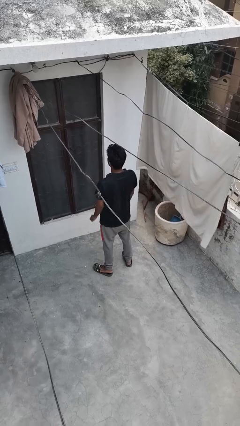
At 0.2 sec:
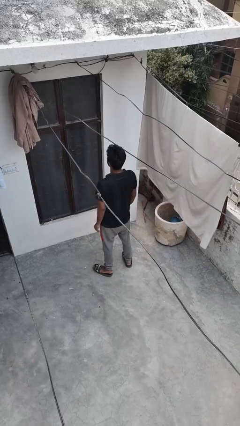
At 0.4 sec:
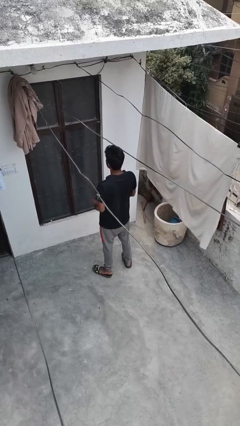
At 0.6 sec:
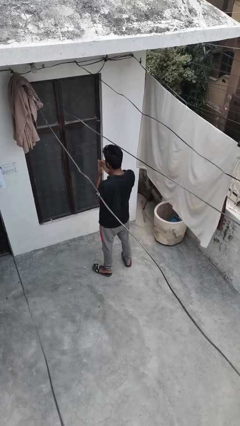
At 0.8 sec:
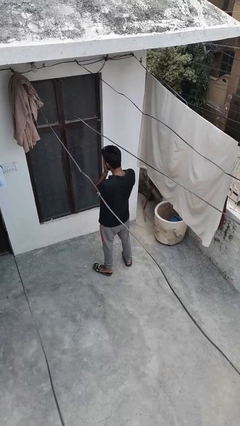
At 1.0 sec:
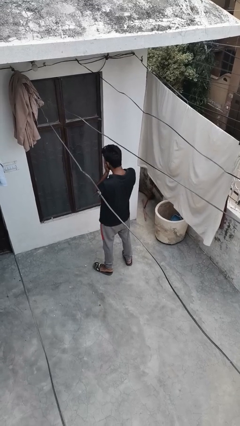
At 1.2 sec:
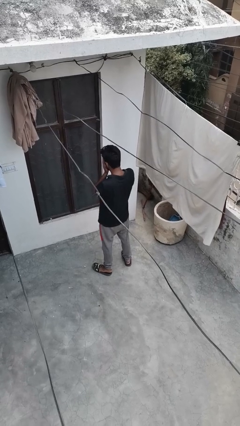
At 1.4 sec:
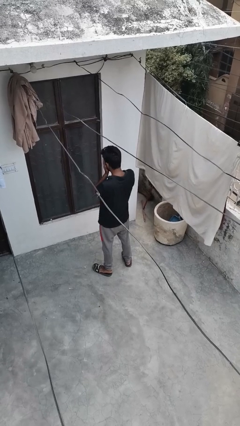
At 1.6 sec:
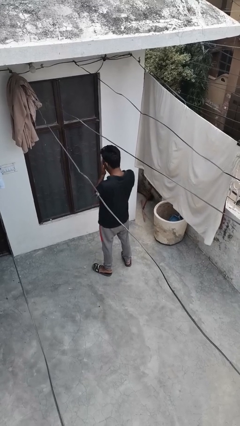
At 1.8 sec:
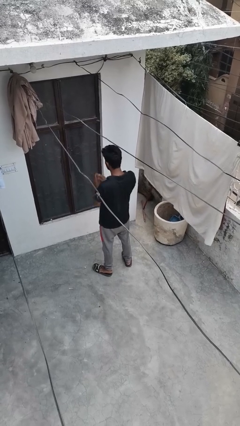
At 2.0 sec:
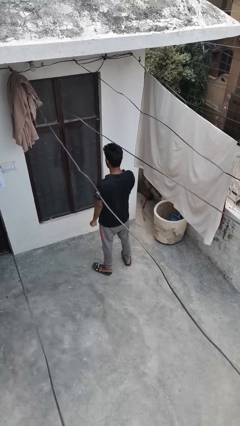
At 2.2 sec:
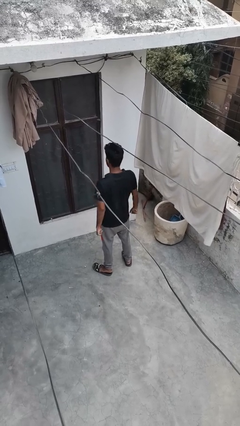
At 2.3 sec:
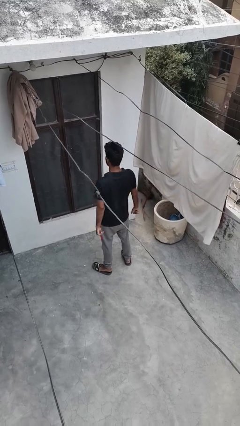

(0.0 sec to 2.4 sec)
person covers face with hands

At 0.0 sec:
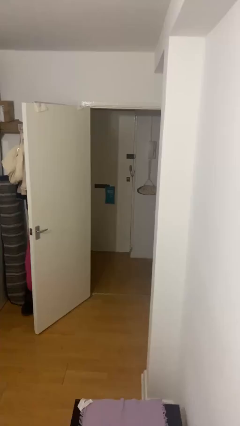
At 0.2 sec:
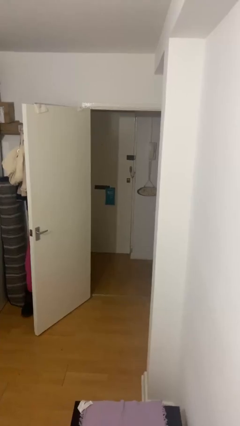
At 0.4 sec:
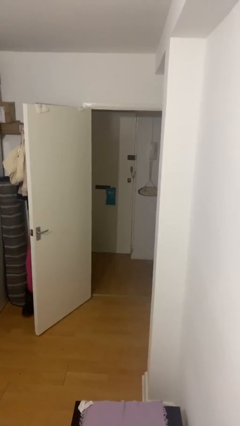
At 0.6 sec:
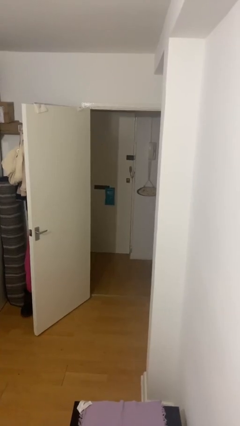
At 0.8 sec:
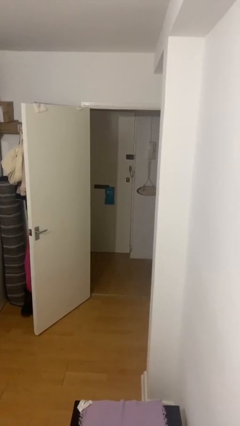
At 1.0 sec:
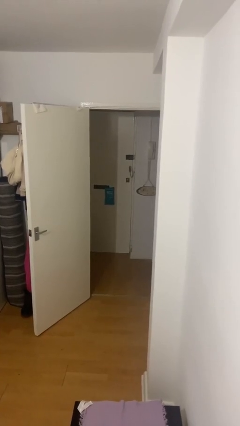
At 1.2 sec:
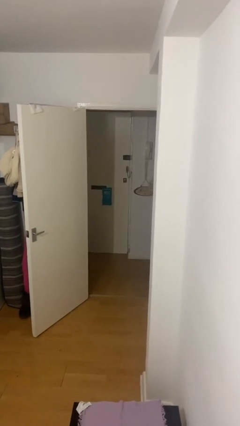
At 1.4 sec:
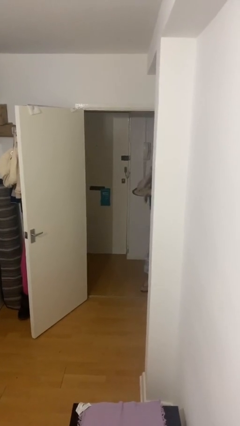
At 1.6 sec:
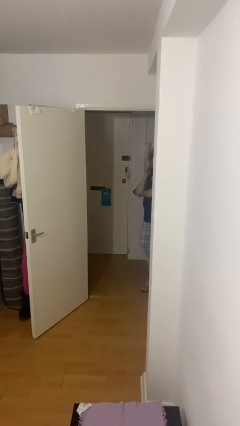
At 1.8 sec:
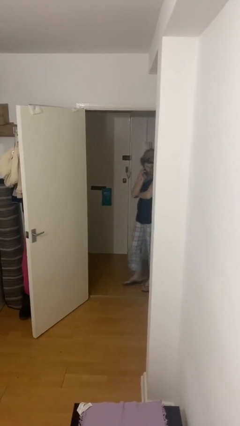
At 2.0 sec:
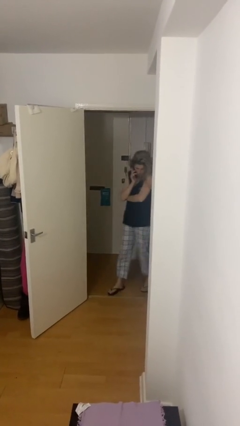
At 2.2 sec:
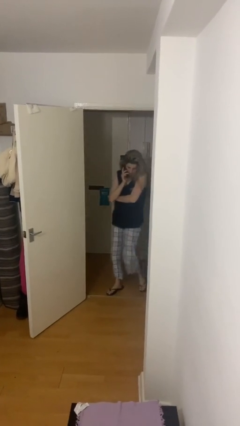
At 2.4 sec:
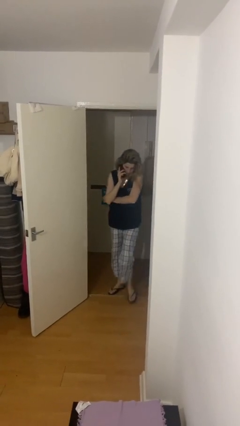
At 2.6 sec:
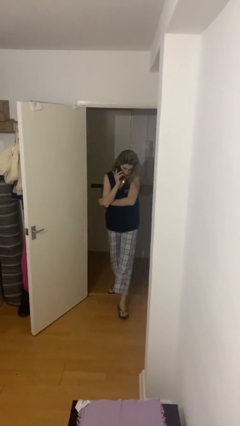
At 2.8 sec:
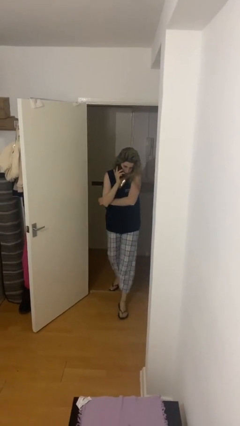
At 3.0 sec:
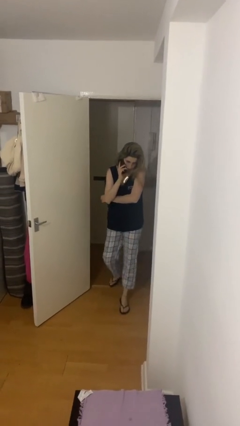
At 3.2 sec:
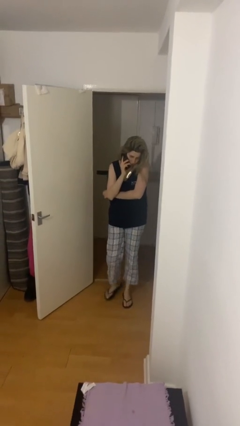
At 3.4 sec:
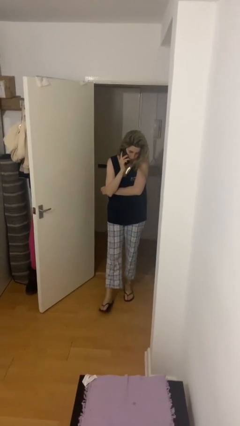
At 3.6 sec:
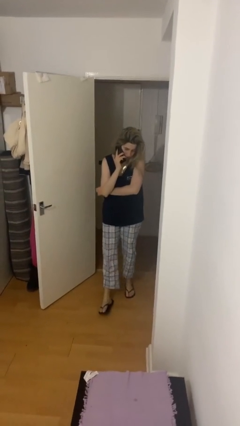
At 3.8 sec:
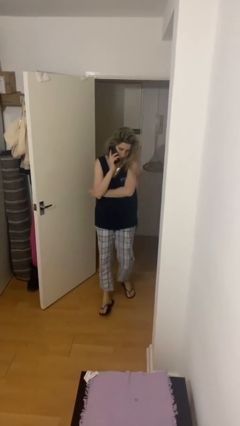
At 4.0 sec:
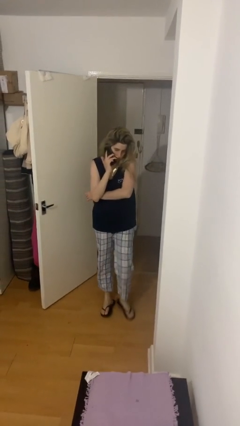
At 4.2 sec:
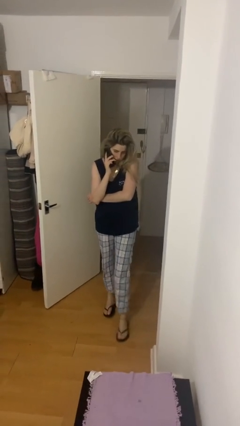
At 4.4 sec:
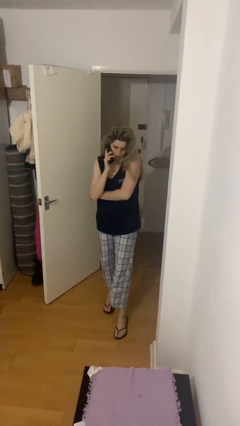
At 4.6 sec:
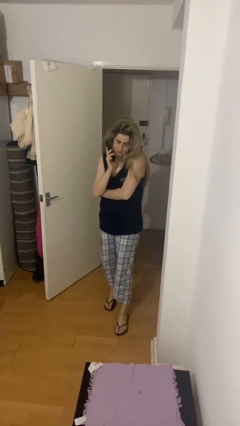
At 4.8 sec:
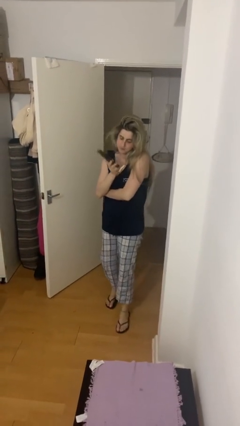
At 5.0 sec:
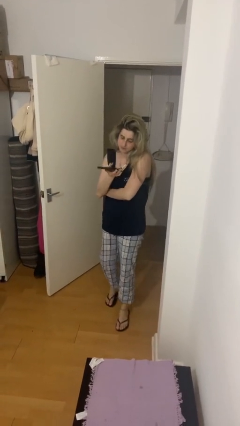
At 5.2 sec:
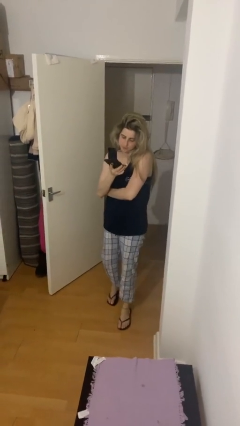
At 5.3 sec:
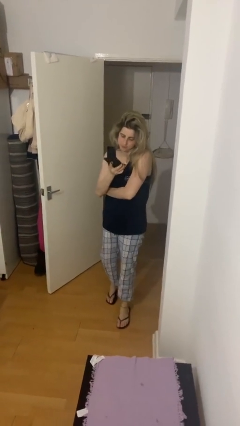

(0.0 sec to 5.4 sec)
person enters scene through structure

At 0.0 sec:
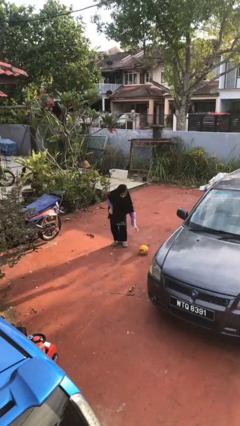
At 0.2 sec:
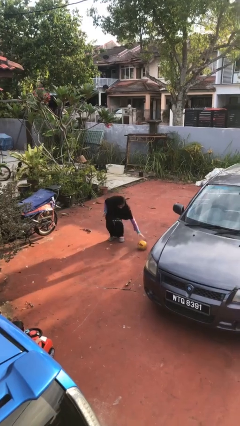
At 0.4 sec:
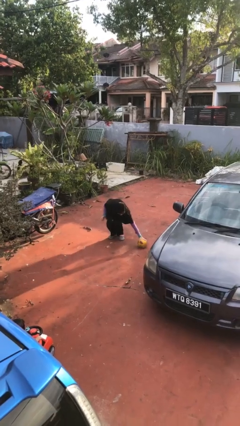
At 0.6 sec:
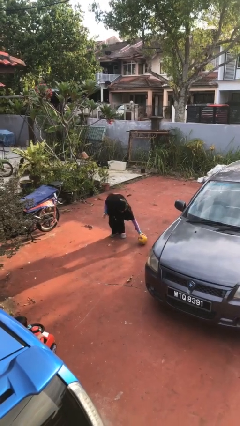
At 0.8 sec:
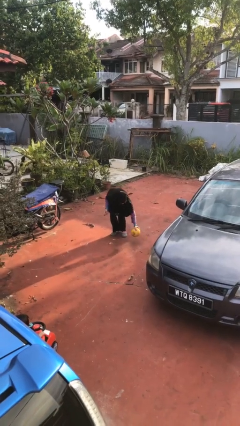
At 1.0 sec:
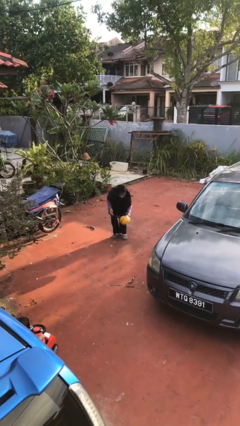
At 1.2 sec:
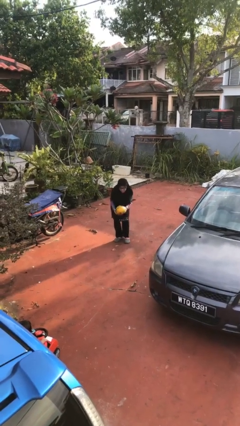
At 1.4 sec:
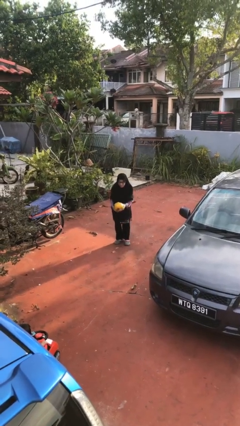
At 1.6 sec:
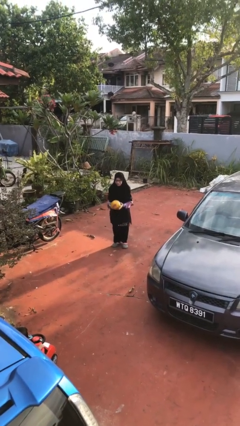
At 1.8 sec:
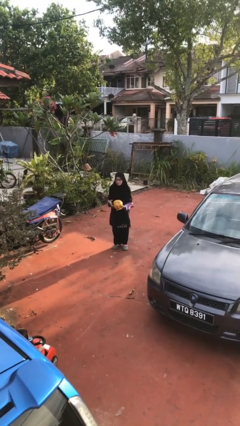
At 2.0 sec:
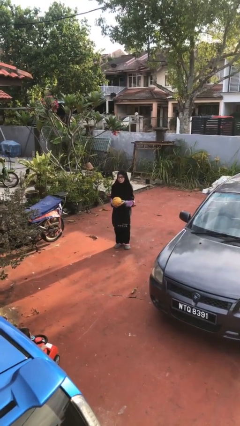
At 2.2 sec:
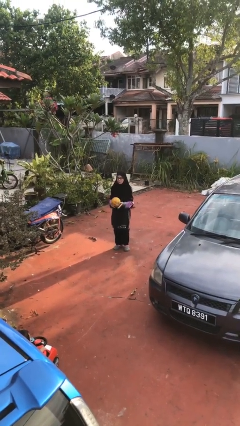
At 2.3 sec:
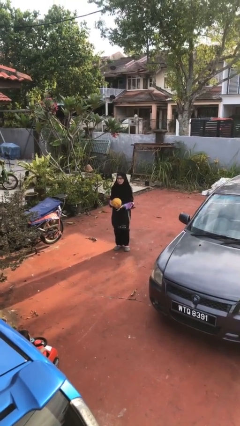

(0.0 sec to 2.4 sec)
person picks up object from floor

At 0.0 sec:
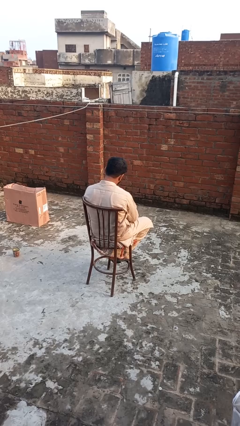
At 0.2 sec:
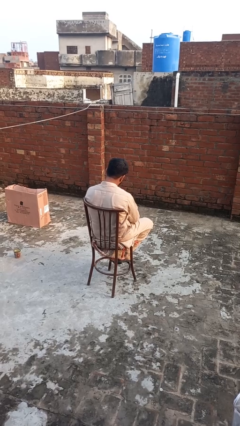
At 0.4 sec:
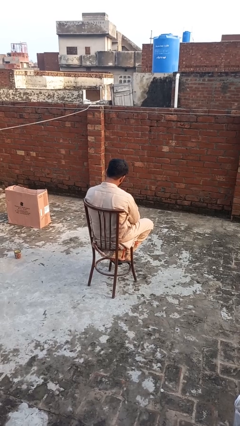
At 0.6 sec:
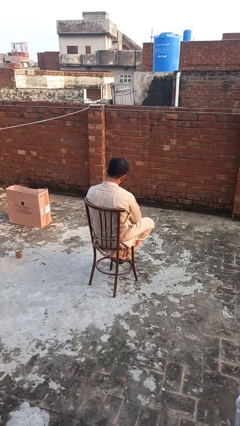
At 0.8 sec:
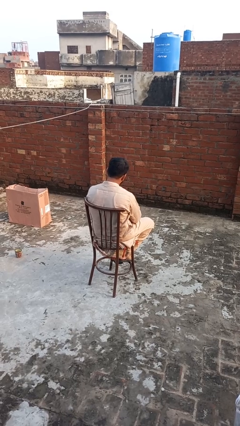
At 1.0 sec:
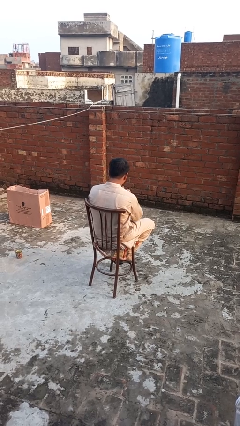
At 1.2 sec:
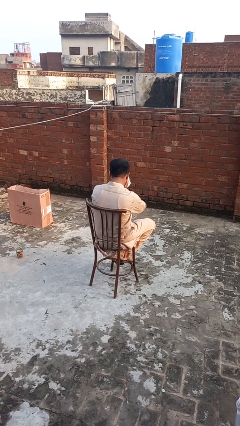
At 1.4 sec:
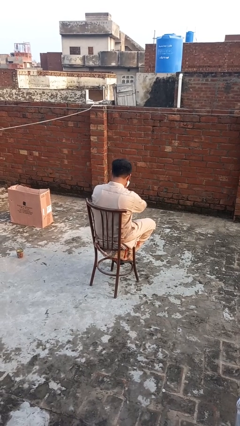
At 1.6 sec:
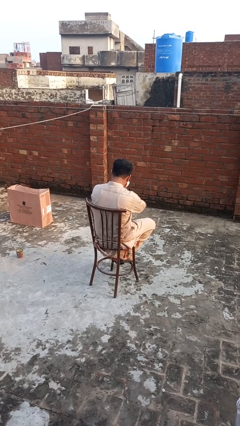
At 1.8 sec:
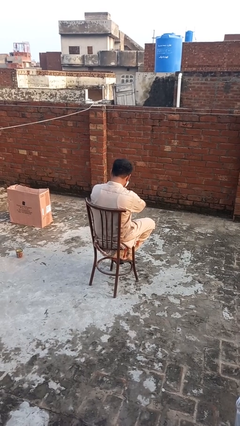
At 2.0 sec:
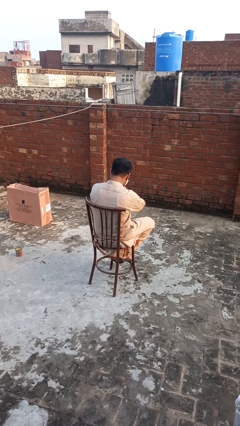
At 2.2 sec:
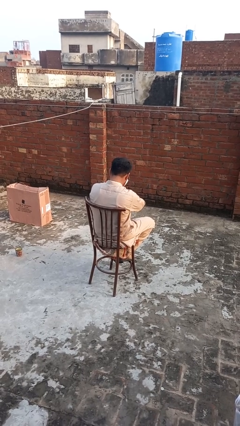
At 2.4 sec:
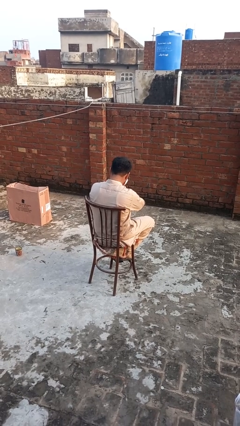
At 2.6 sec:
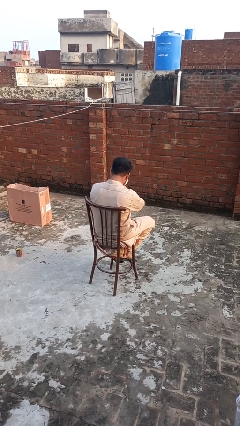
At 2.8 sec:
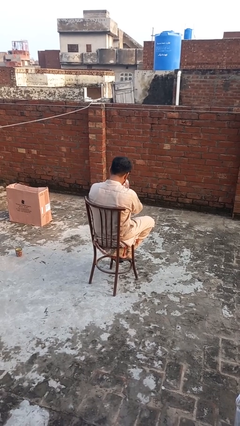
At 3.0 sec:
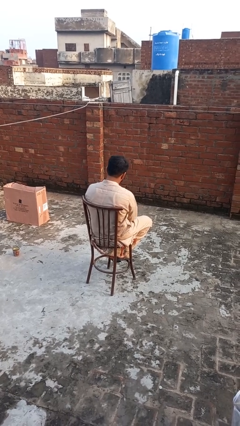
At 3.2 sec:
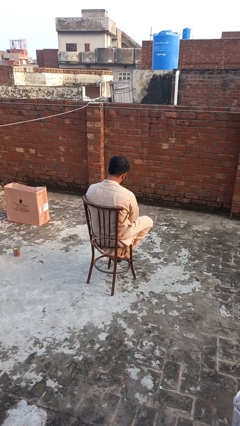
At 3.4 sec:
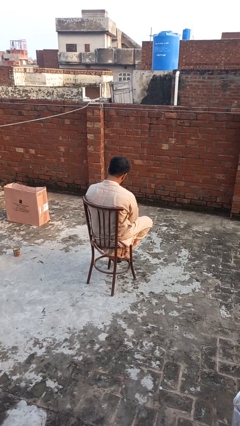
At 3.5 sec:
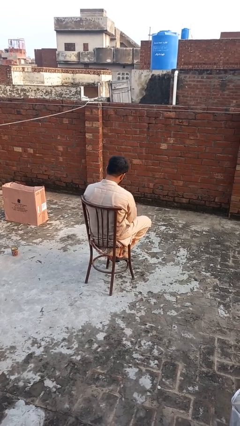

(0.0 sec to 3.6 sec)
person blows nose

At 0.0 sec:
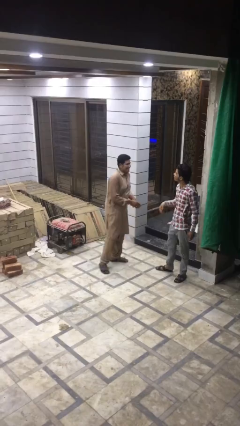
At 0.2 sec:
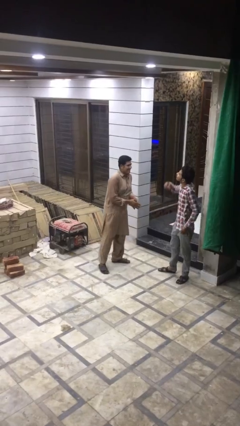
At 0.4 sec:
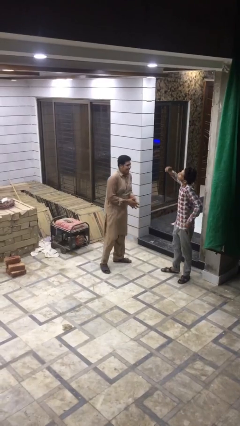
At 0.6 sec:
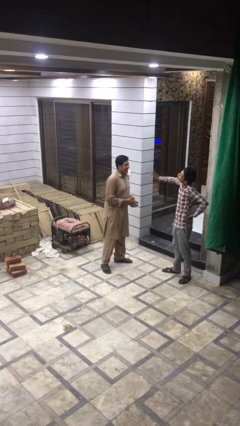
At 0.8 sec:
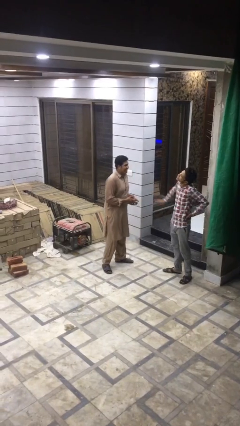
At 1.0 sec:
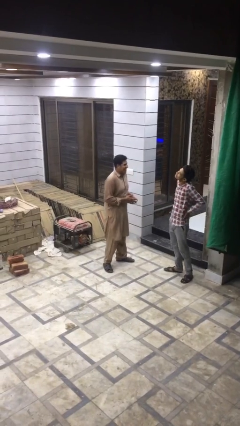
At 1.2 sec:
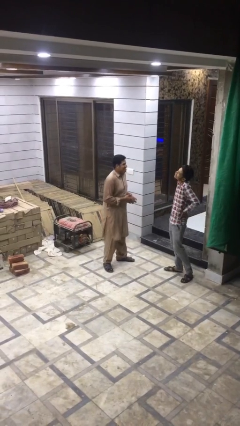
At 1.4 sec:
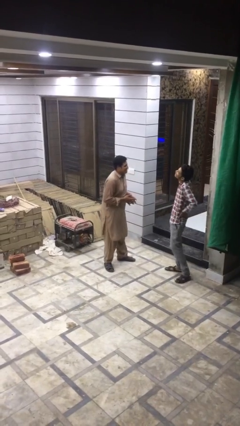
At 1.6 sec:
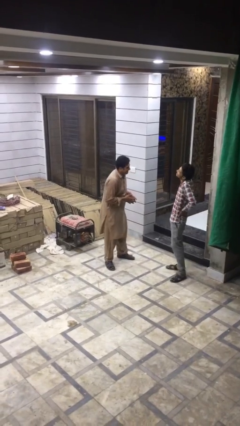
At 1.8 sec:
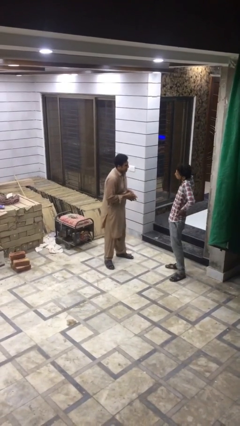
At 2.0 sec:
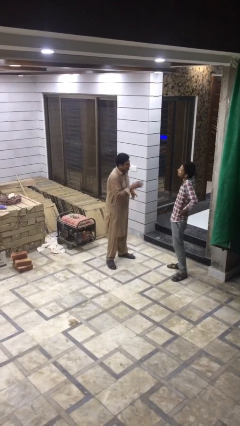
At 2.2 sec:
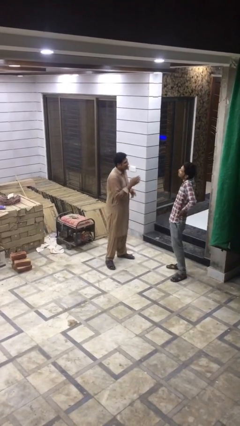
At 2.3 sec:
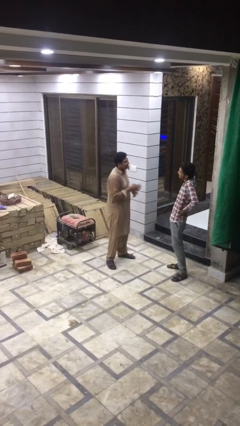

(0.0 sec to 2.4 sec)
person talks to person

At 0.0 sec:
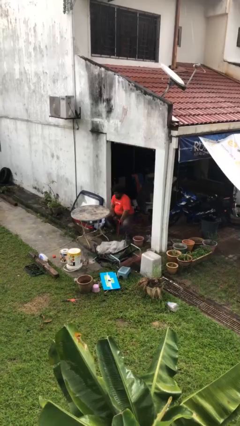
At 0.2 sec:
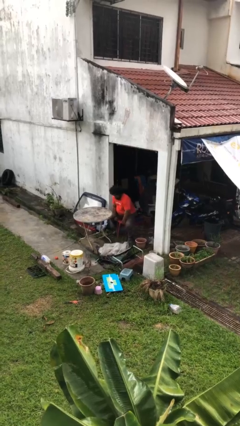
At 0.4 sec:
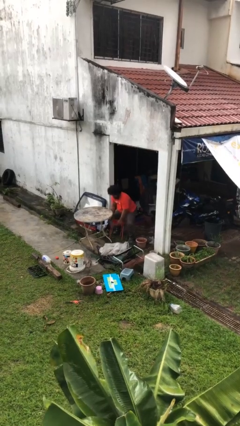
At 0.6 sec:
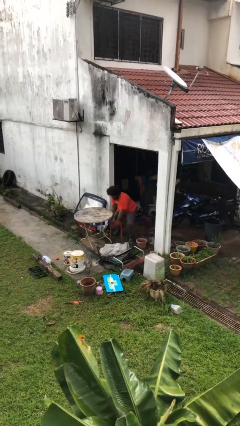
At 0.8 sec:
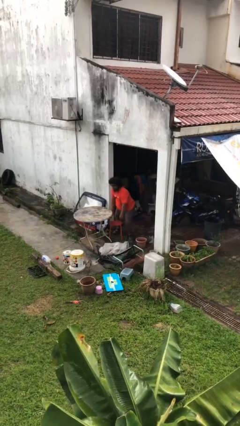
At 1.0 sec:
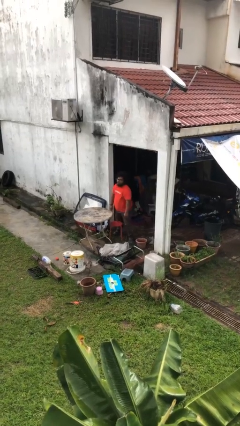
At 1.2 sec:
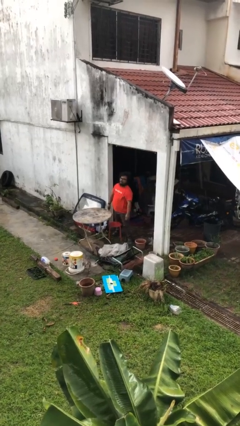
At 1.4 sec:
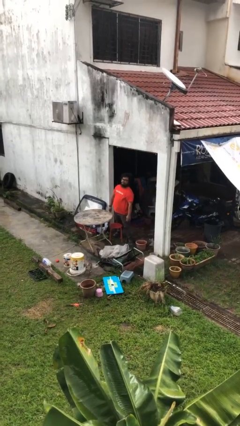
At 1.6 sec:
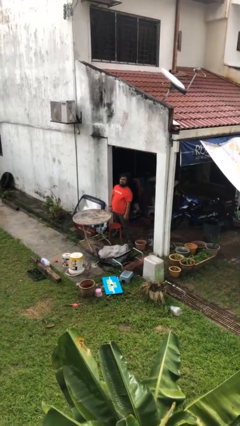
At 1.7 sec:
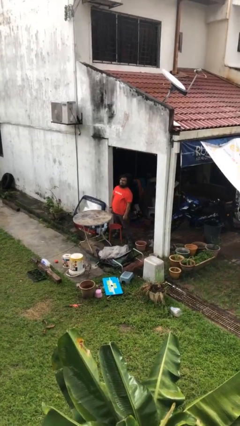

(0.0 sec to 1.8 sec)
person stands up
